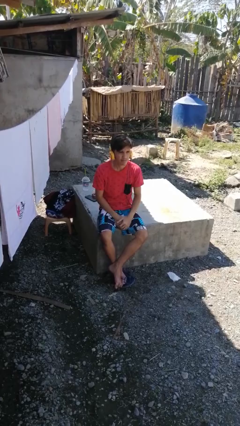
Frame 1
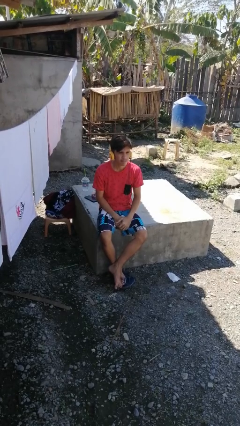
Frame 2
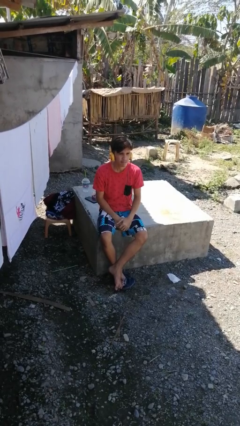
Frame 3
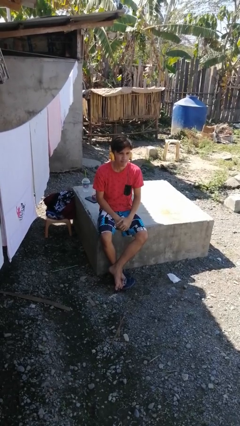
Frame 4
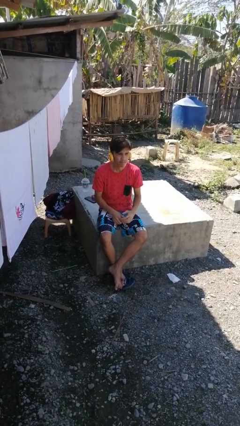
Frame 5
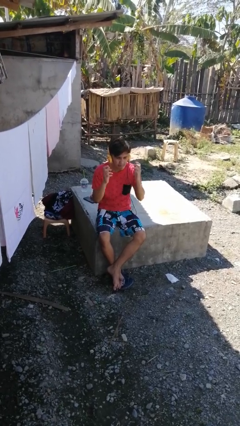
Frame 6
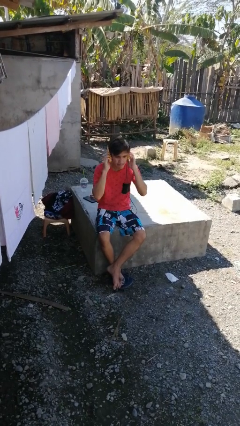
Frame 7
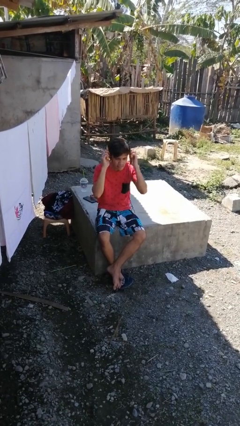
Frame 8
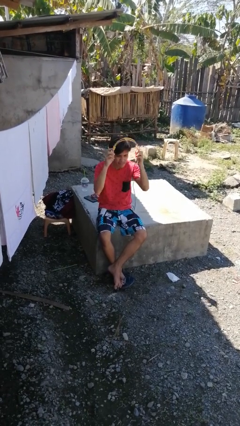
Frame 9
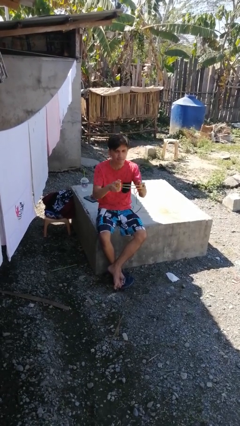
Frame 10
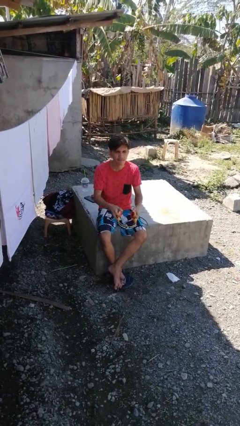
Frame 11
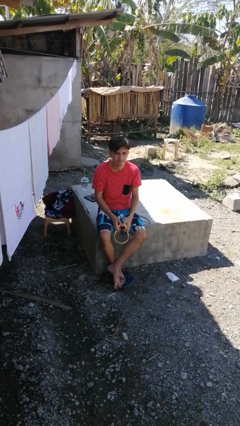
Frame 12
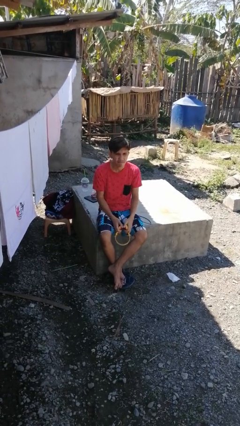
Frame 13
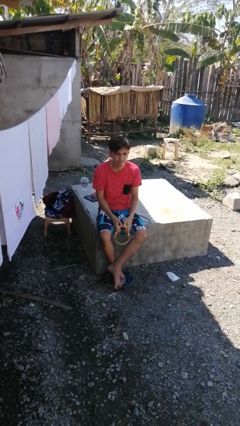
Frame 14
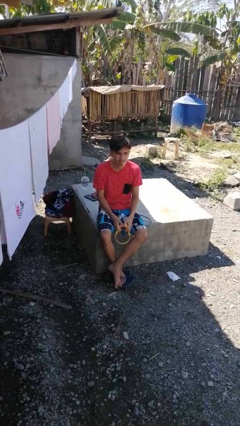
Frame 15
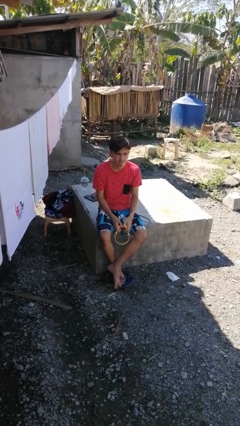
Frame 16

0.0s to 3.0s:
person takes off headphones

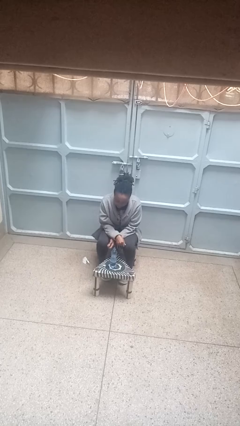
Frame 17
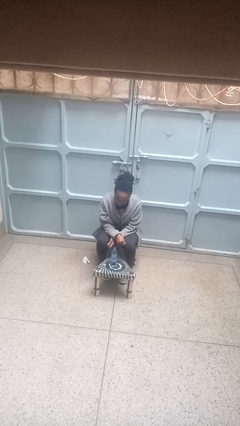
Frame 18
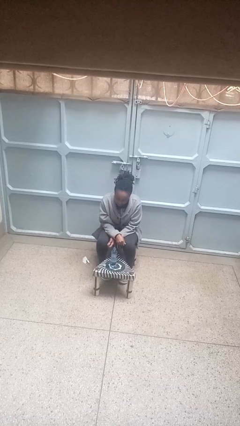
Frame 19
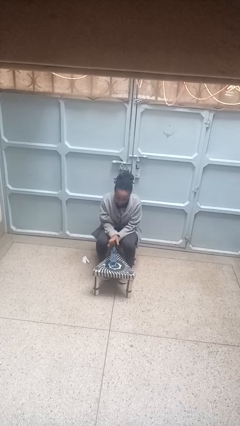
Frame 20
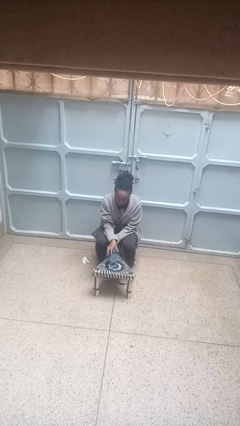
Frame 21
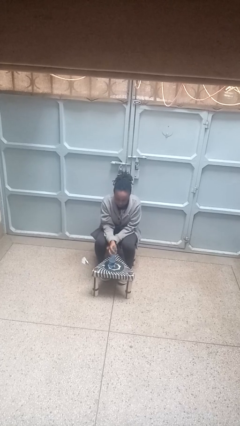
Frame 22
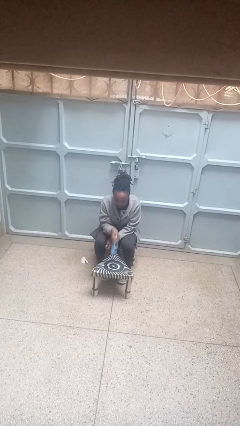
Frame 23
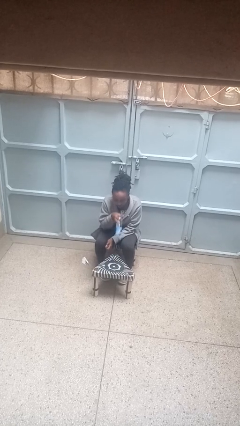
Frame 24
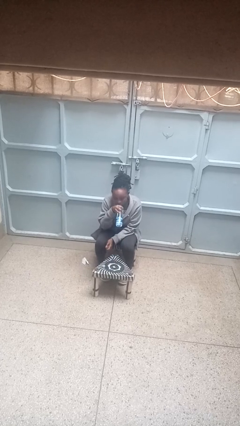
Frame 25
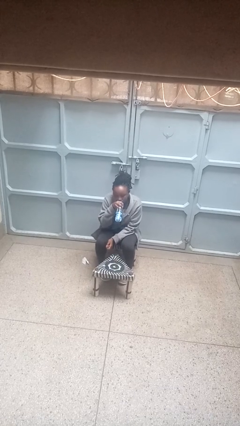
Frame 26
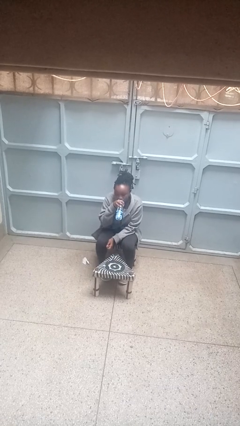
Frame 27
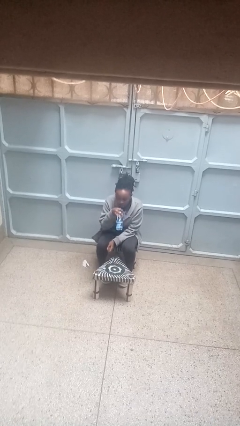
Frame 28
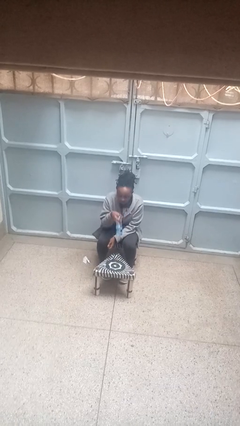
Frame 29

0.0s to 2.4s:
person drinks from cup

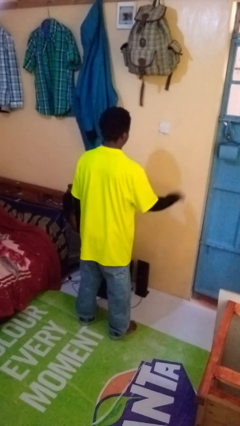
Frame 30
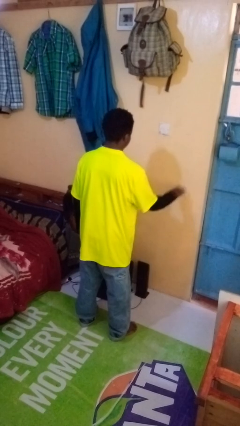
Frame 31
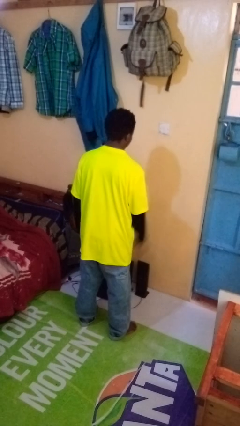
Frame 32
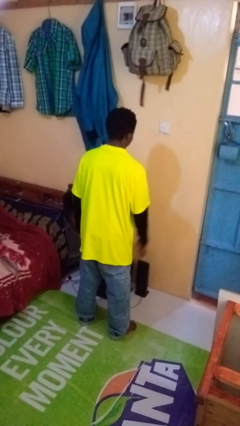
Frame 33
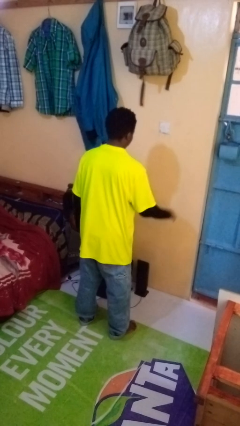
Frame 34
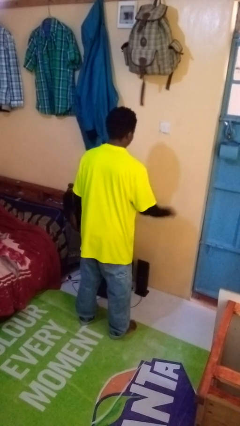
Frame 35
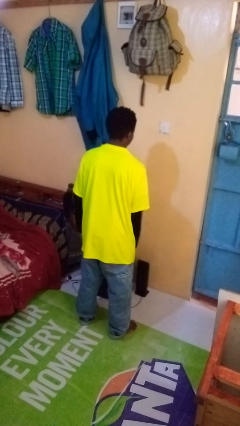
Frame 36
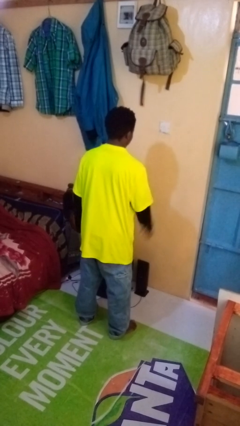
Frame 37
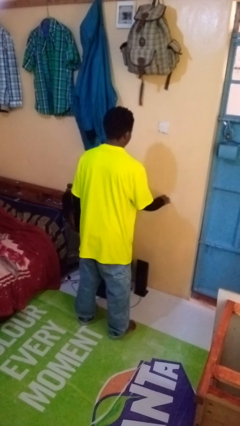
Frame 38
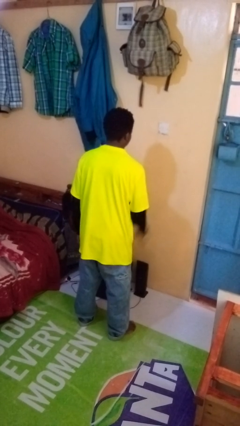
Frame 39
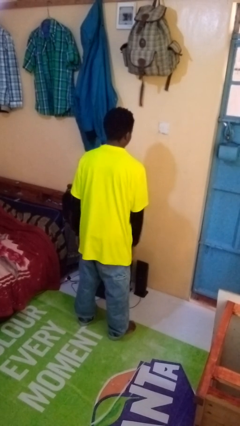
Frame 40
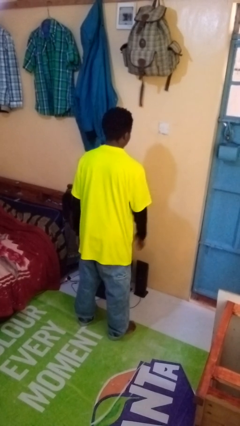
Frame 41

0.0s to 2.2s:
person slaps hands on thighs

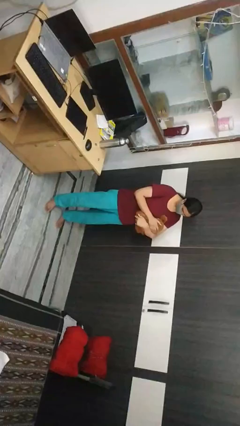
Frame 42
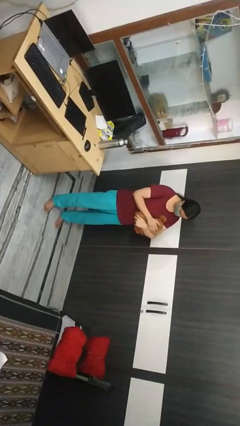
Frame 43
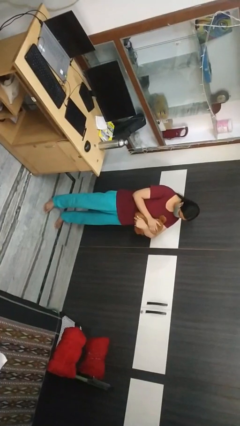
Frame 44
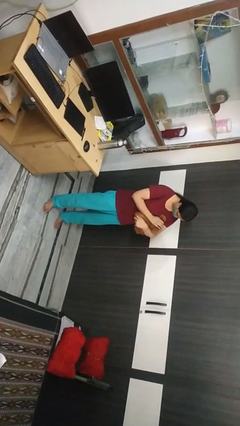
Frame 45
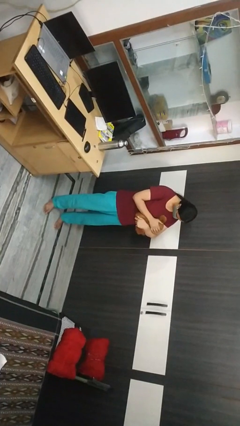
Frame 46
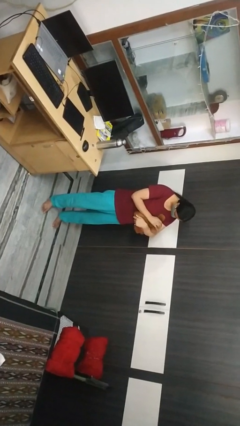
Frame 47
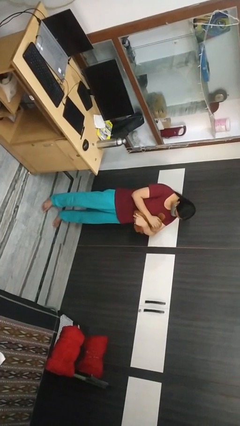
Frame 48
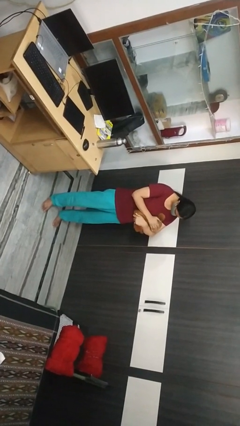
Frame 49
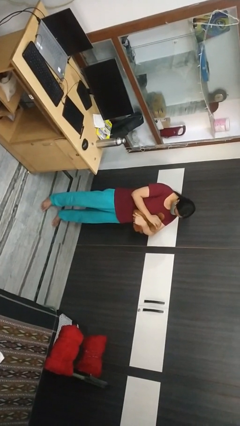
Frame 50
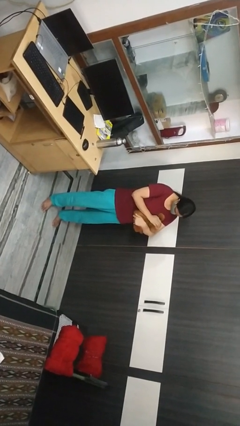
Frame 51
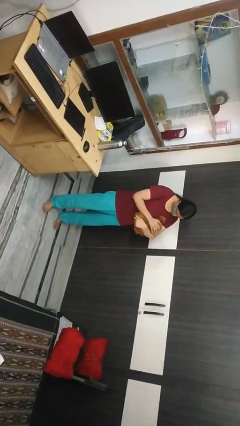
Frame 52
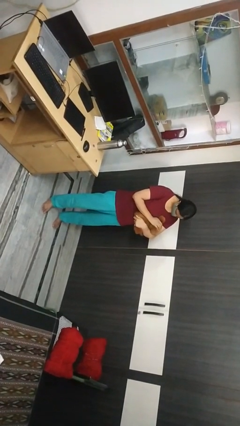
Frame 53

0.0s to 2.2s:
person pets cat

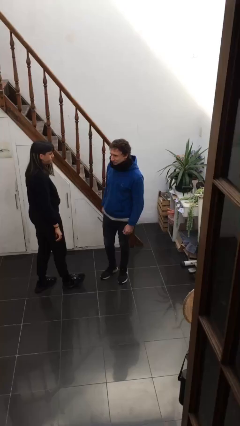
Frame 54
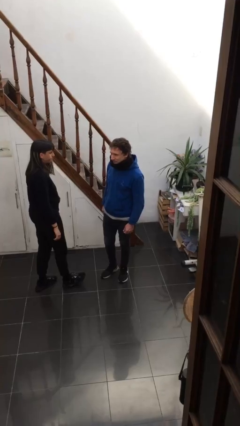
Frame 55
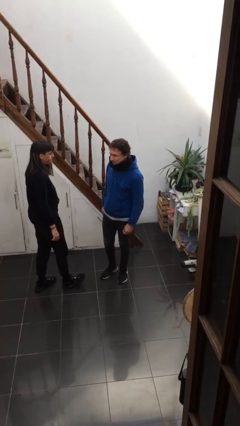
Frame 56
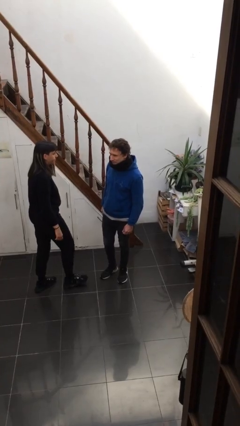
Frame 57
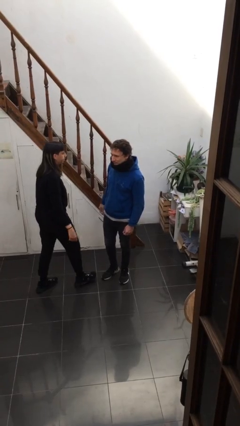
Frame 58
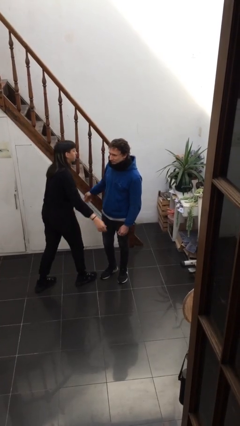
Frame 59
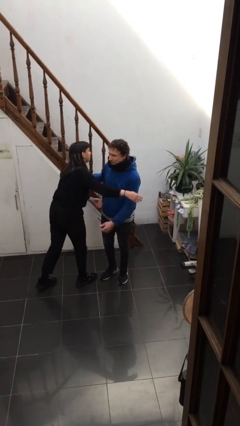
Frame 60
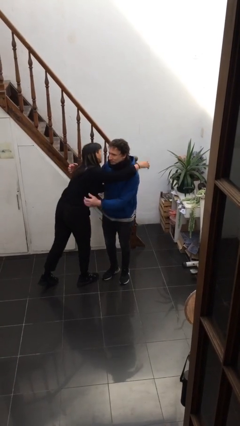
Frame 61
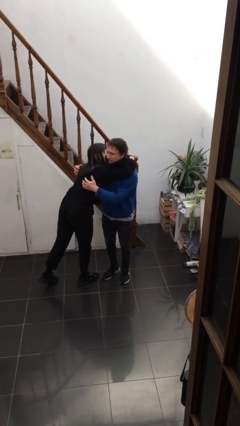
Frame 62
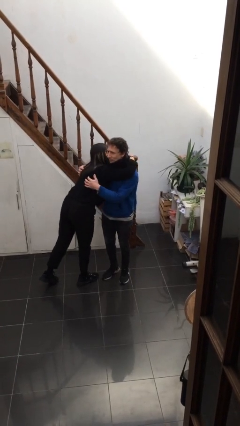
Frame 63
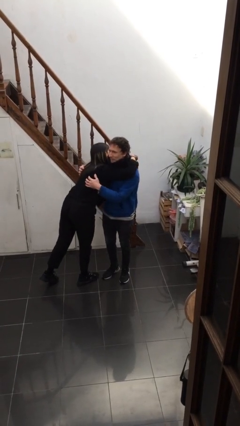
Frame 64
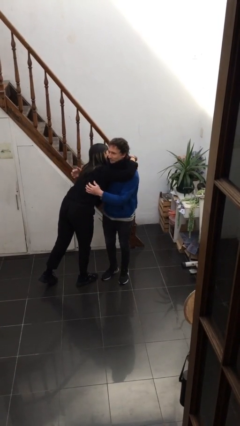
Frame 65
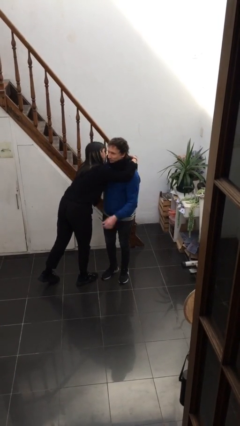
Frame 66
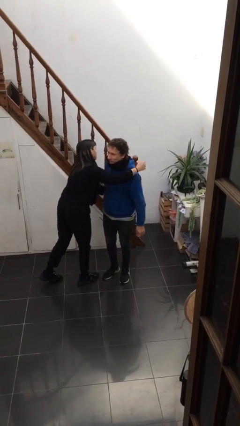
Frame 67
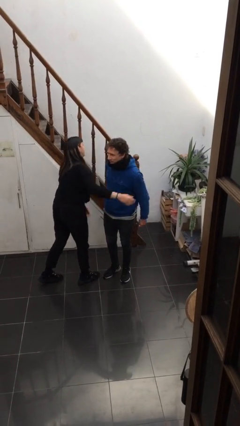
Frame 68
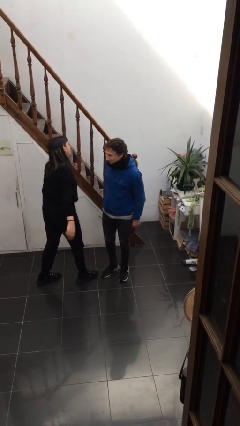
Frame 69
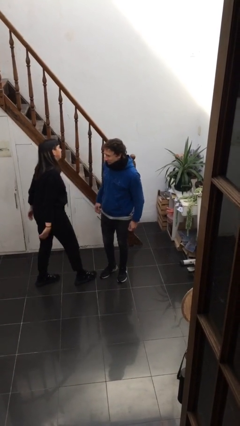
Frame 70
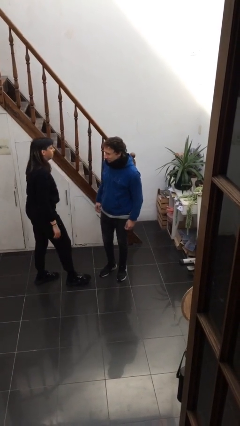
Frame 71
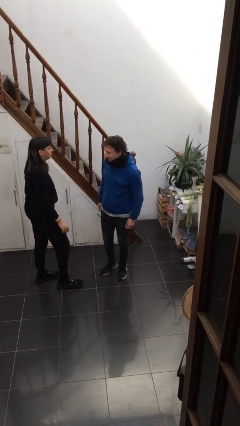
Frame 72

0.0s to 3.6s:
person embraces person

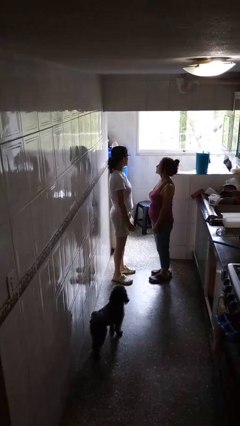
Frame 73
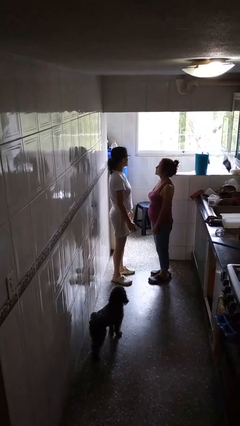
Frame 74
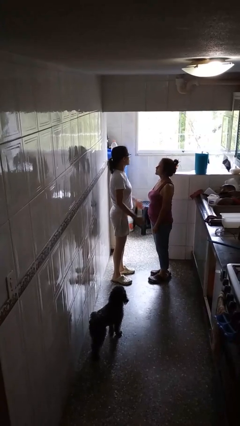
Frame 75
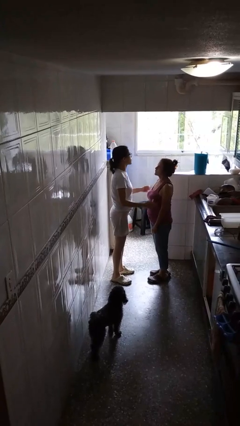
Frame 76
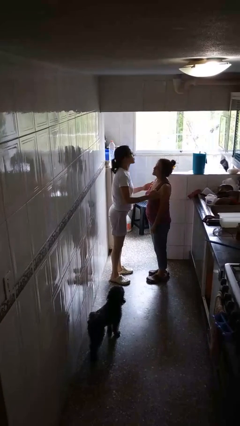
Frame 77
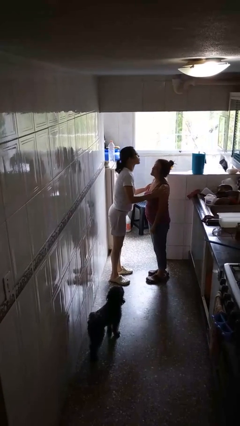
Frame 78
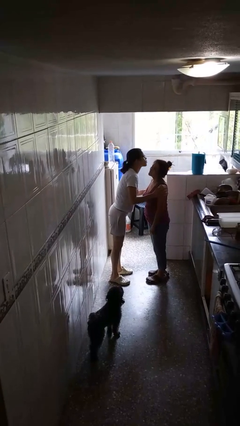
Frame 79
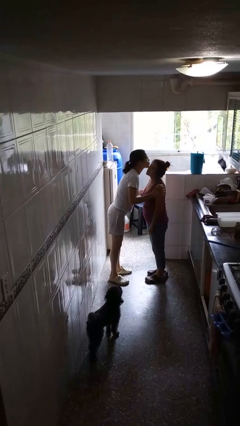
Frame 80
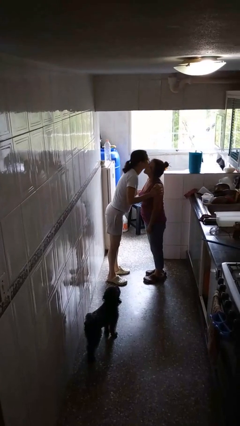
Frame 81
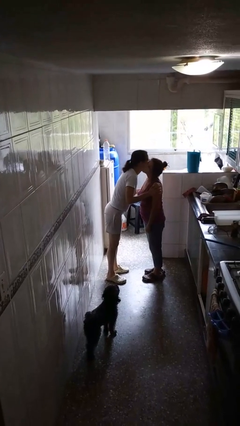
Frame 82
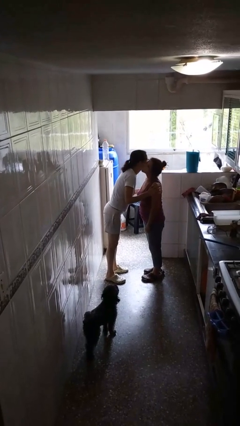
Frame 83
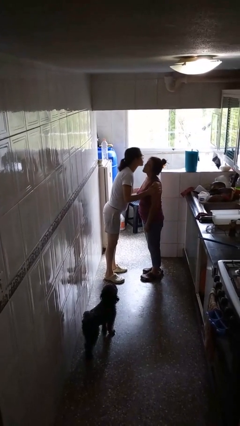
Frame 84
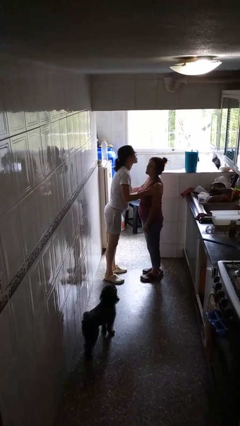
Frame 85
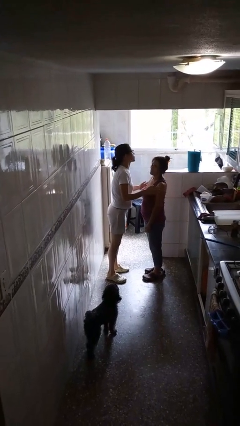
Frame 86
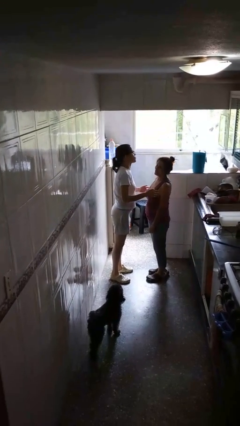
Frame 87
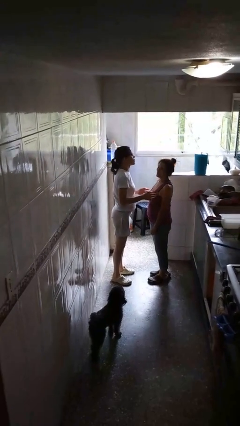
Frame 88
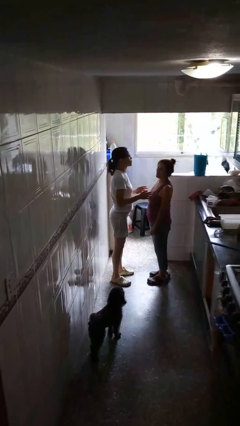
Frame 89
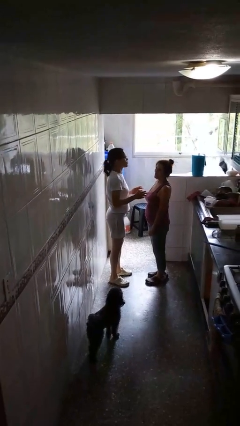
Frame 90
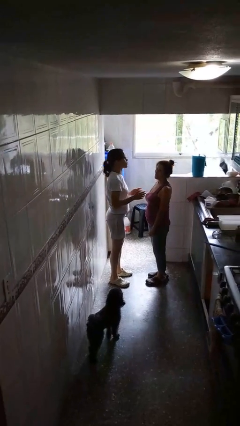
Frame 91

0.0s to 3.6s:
person kisses cheek of person

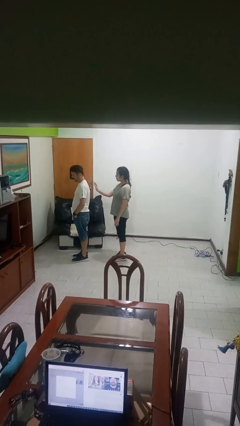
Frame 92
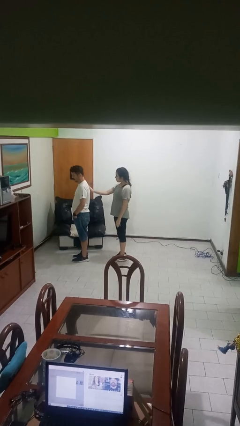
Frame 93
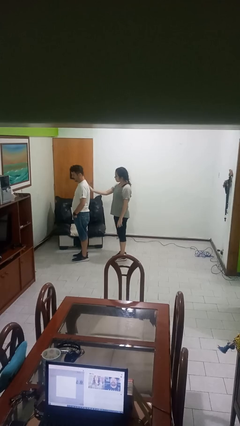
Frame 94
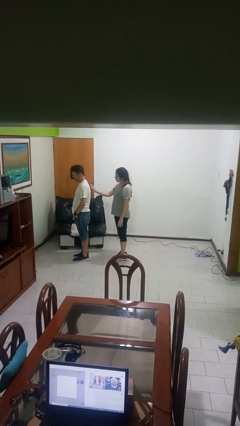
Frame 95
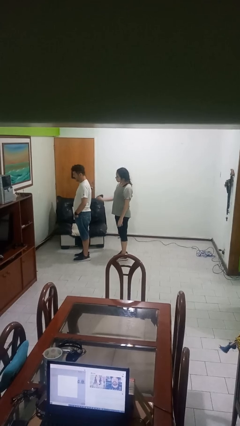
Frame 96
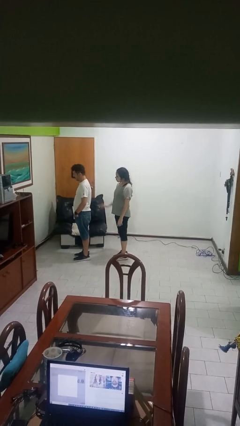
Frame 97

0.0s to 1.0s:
person touches back of person
